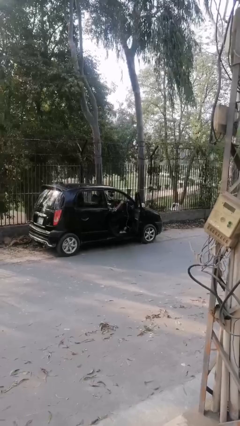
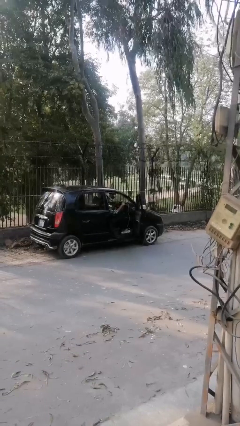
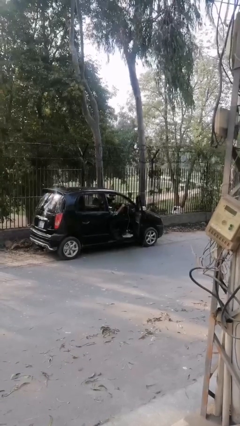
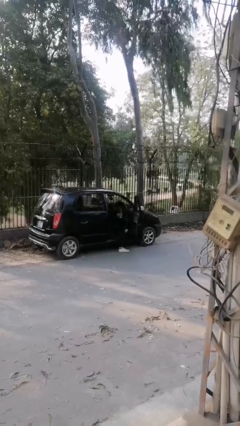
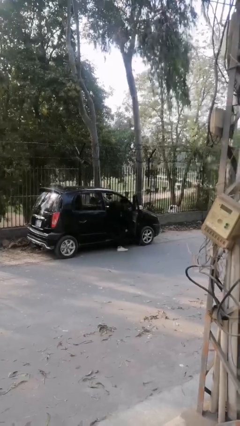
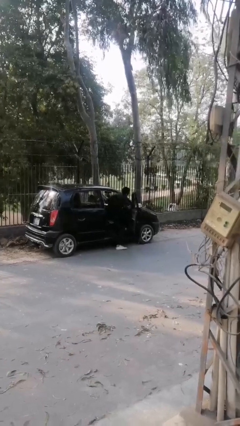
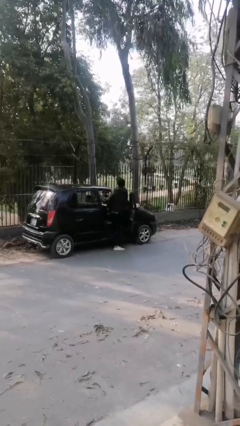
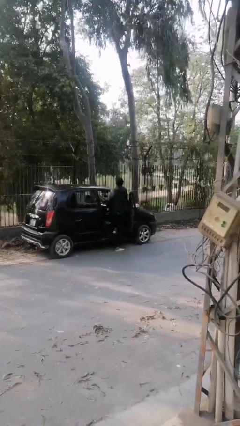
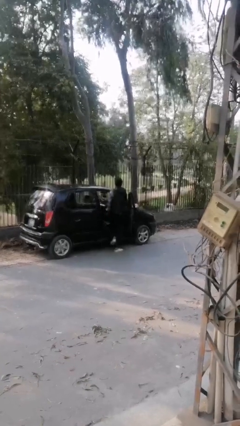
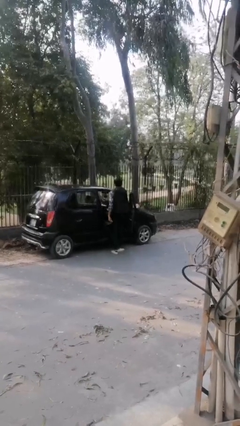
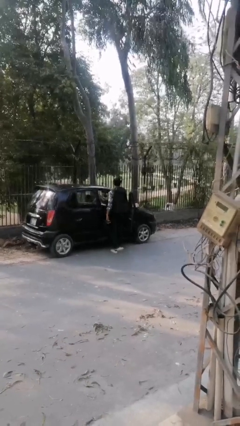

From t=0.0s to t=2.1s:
person exits car

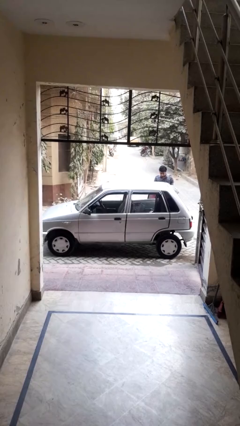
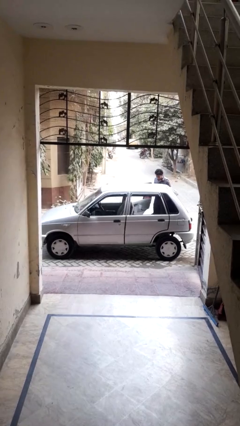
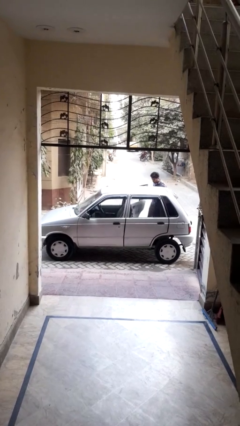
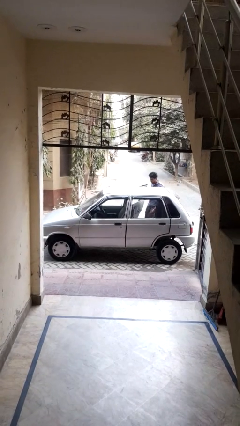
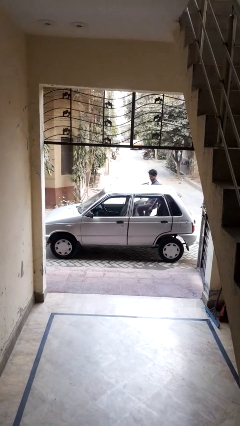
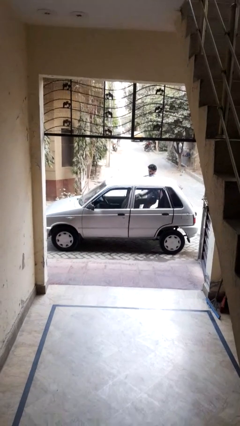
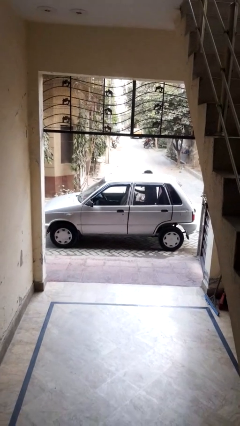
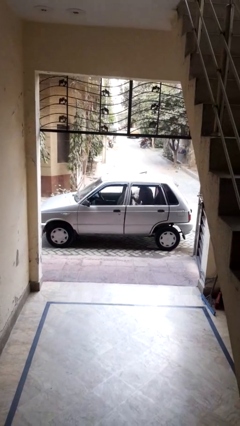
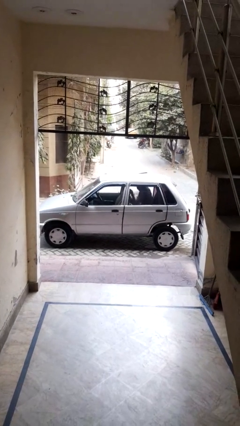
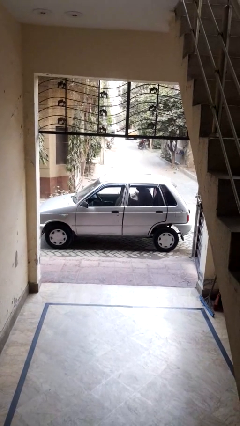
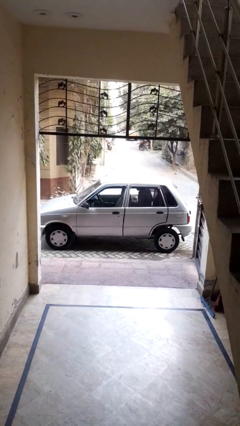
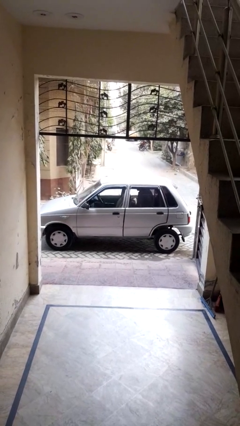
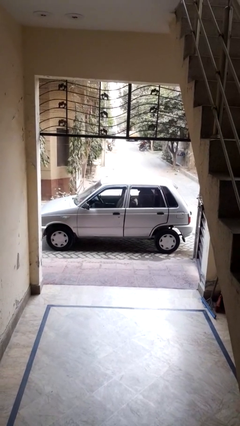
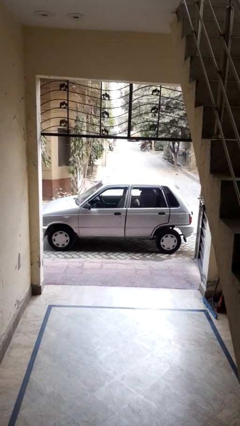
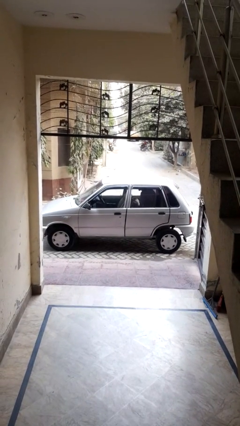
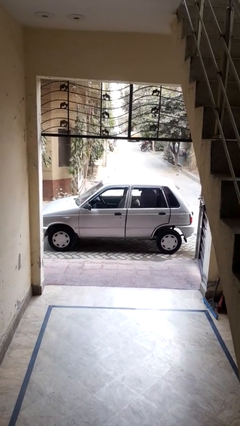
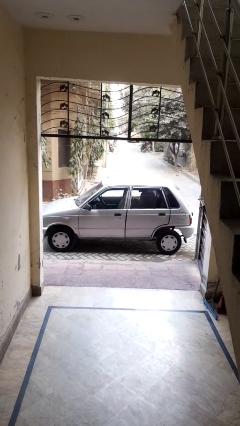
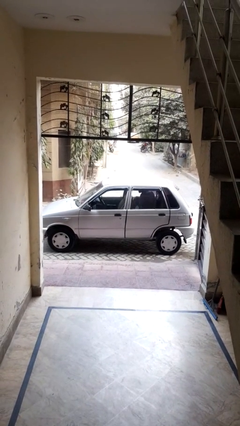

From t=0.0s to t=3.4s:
car picks up person

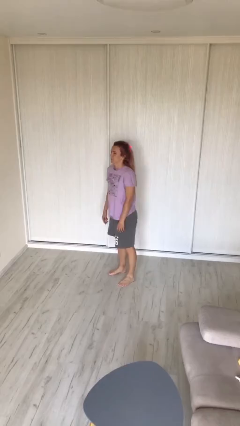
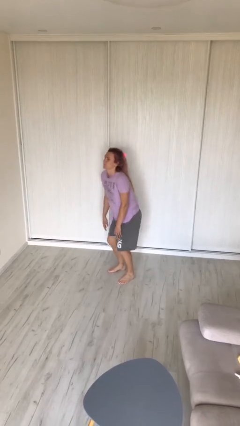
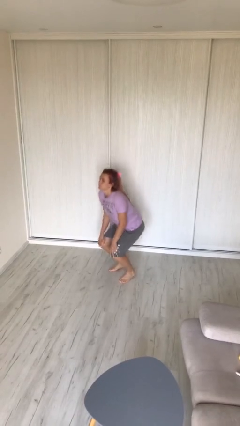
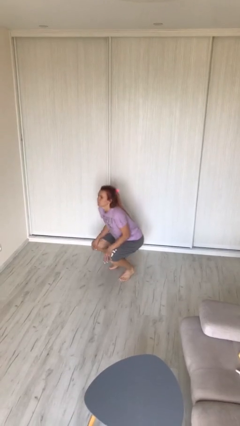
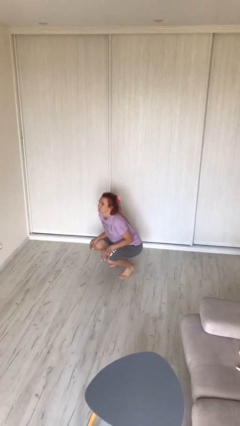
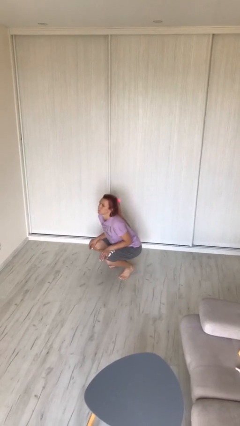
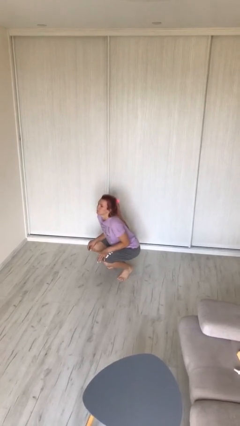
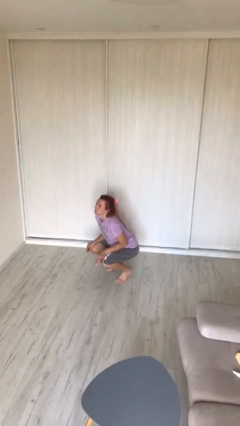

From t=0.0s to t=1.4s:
person squats

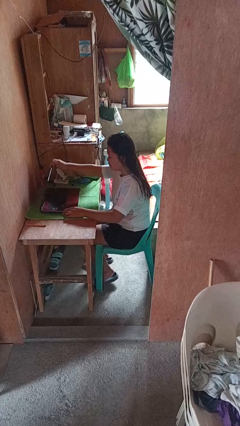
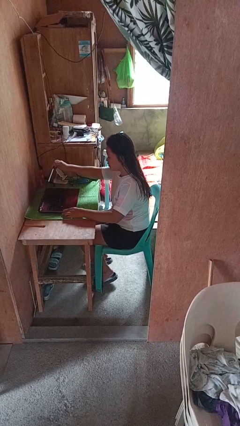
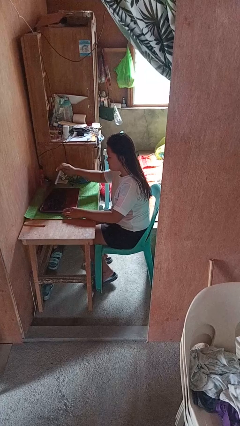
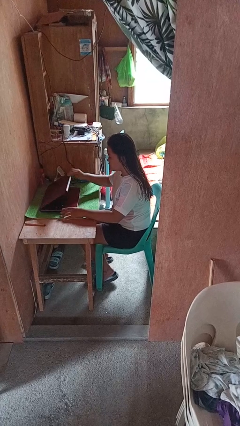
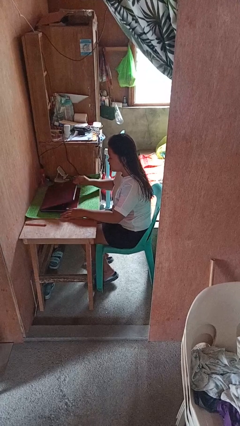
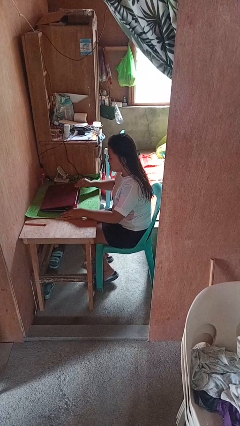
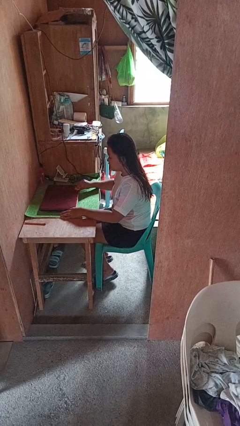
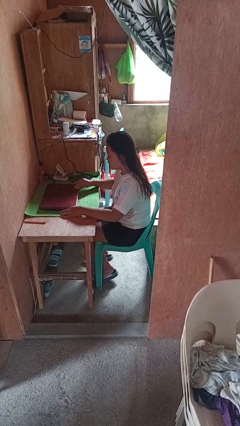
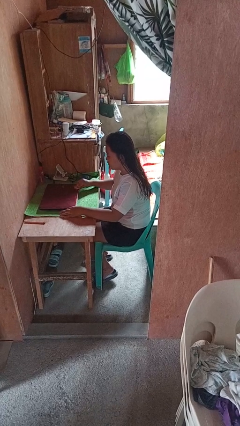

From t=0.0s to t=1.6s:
person closes laptop

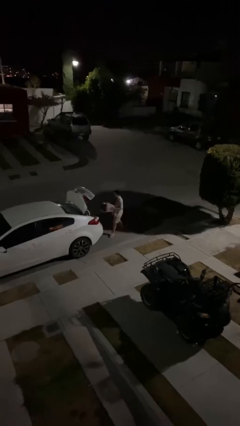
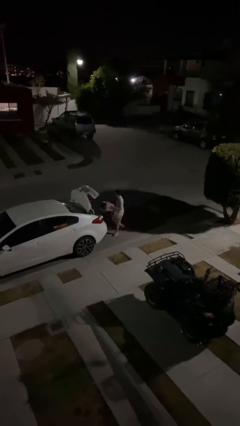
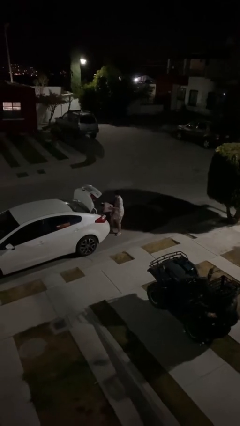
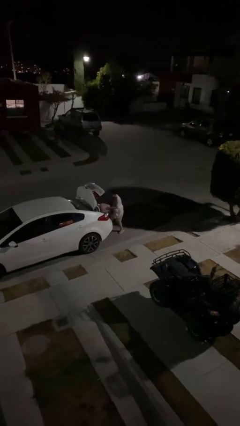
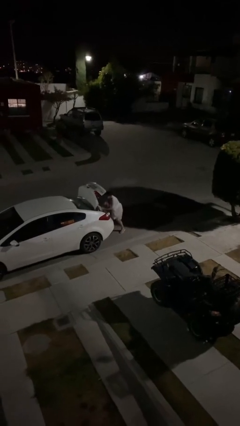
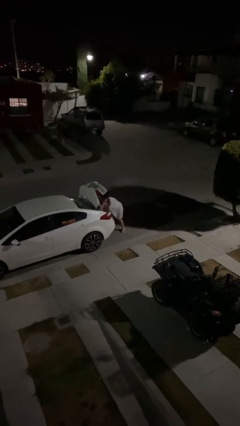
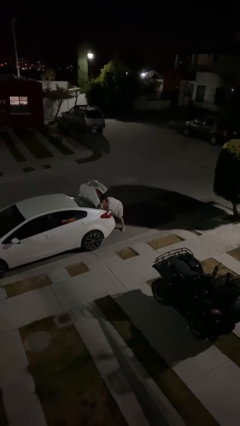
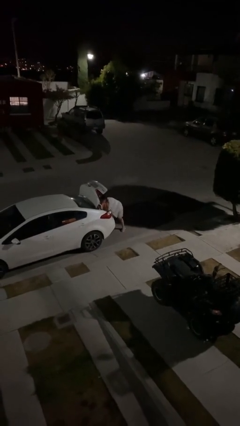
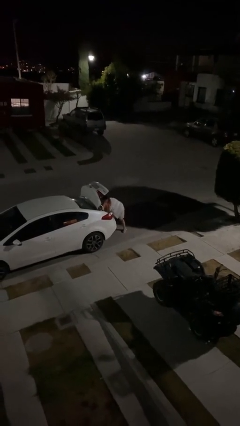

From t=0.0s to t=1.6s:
person loads car

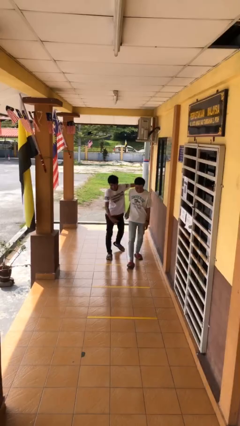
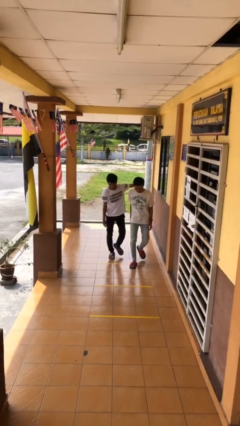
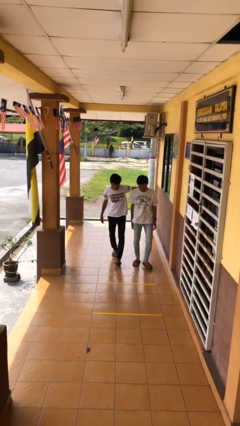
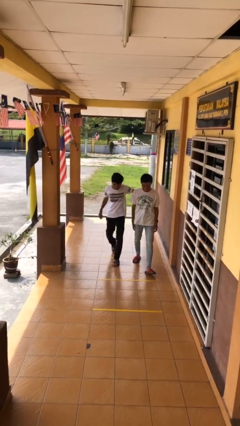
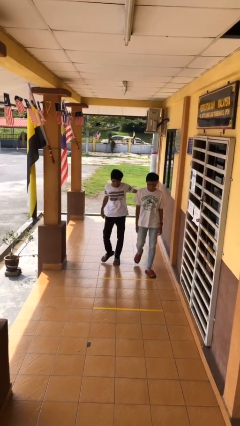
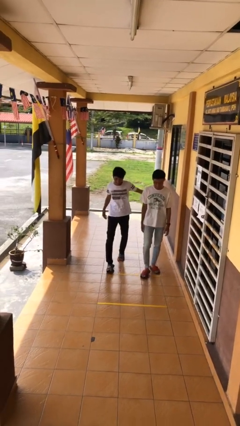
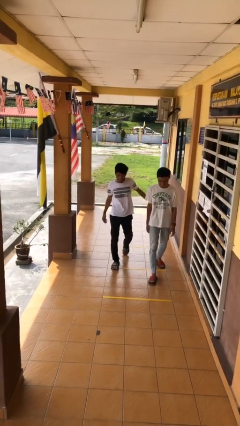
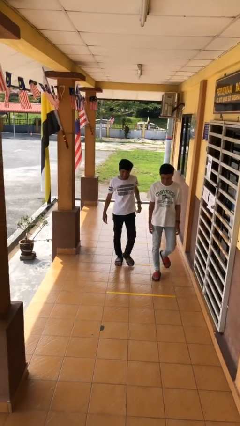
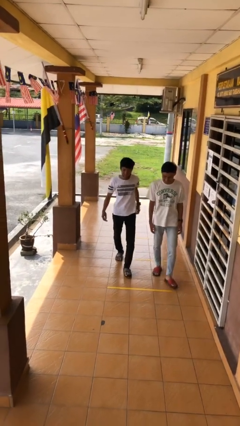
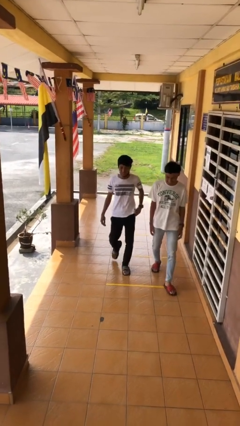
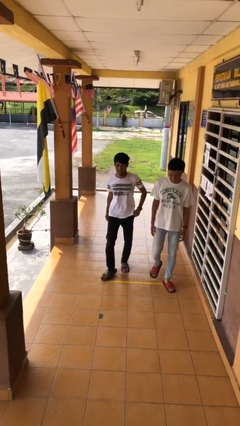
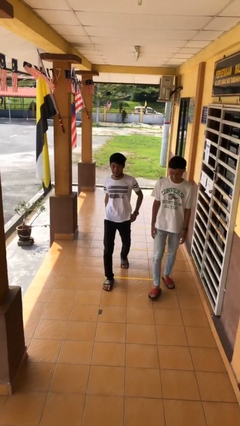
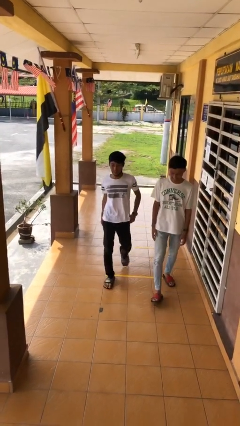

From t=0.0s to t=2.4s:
person talks to person

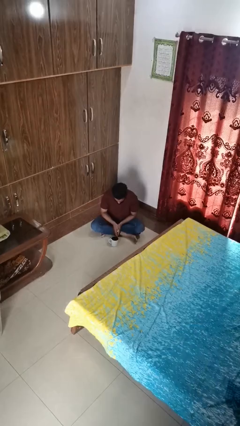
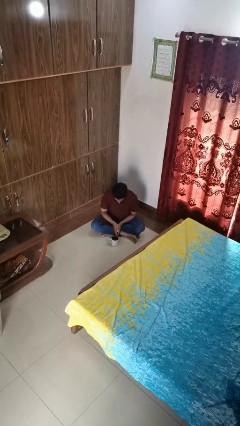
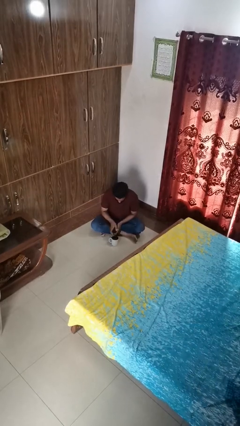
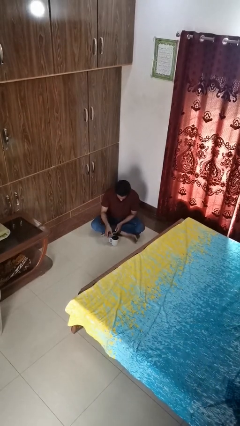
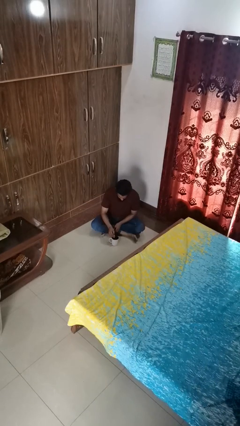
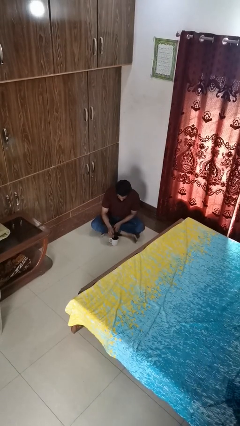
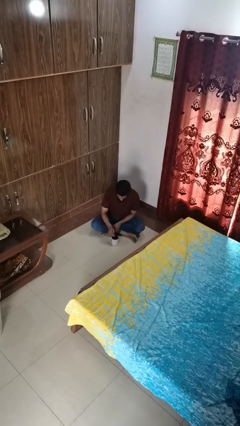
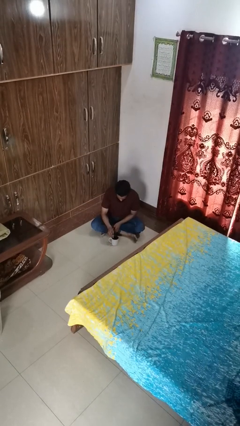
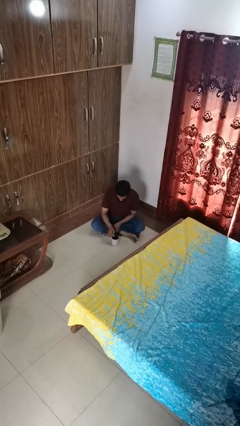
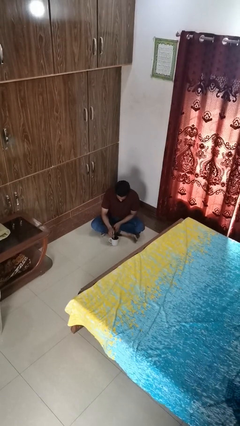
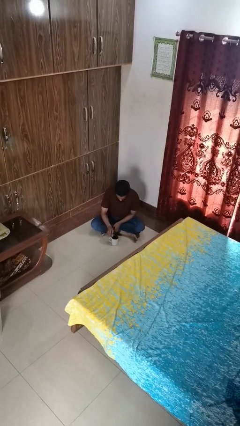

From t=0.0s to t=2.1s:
person stirs mug

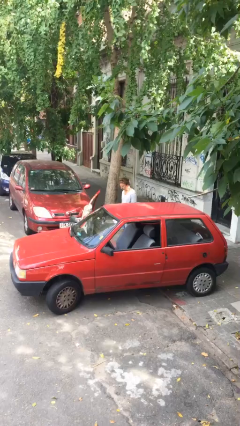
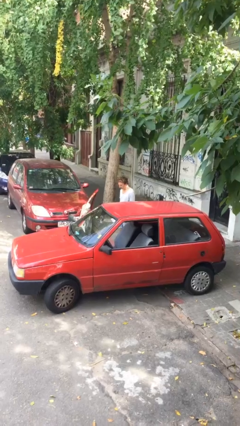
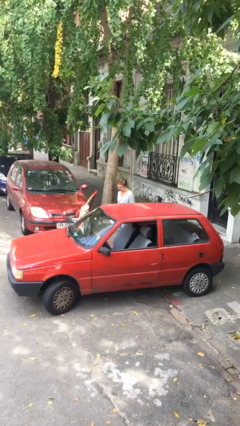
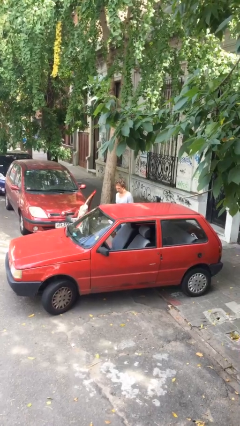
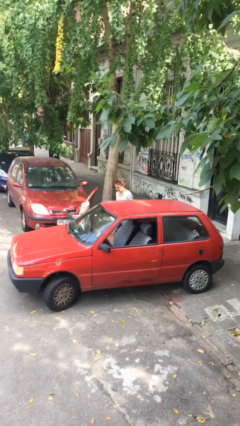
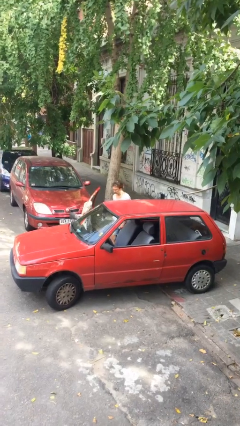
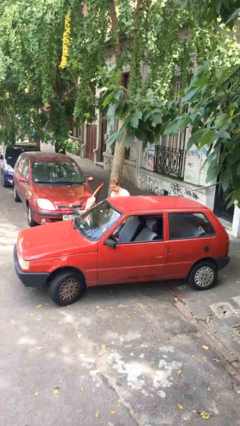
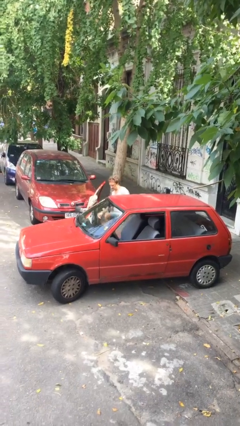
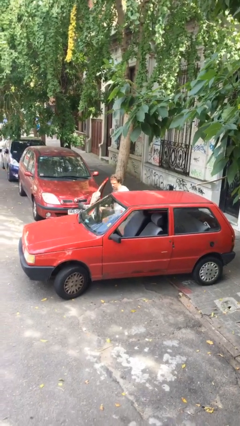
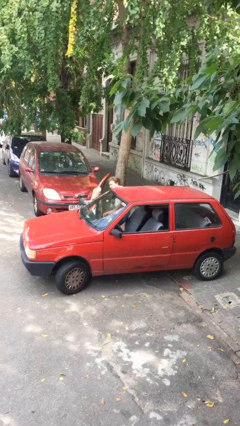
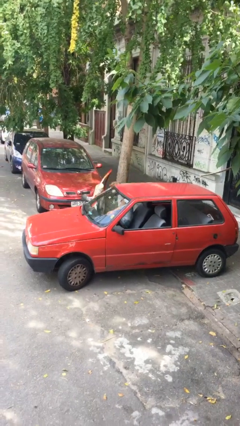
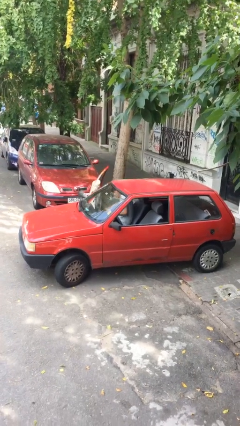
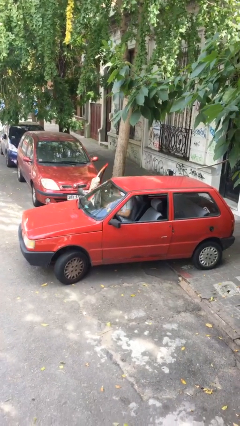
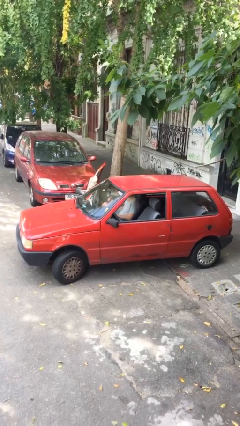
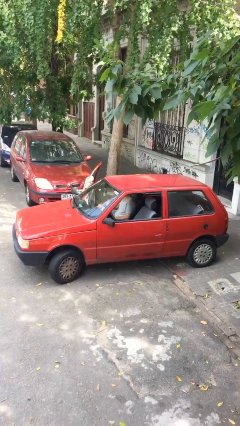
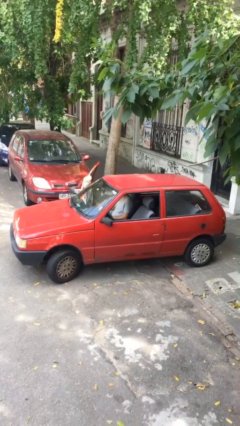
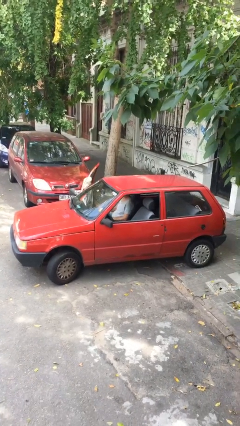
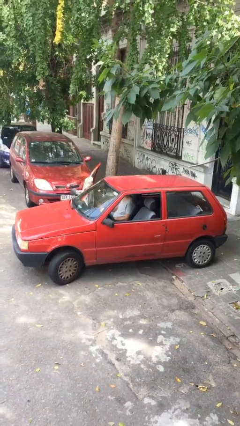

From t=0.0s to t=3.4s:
person enters car
